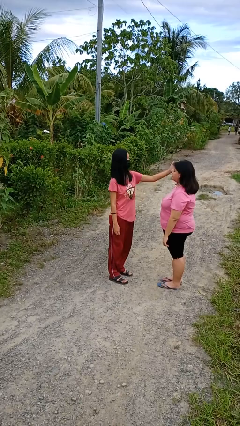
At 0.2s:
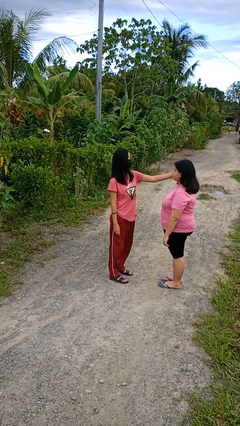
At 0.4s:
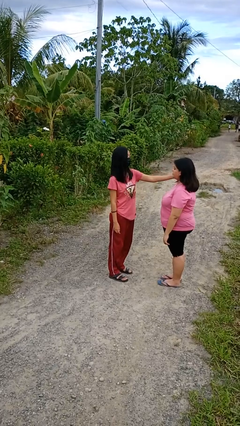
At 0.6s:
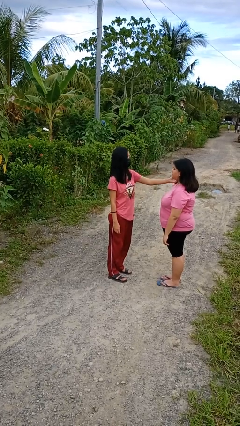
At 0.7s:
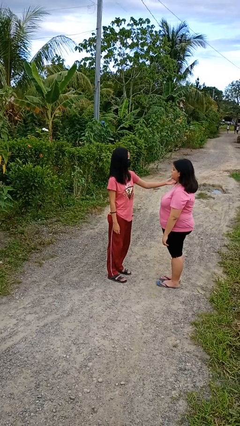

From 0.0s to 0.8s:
person touches face of person

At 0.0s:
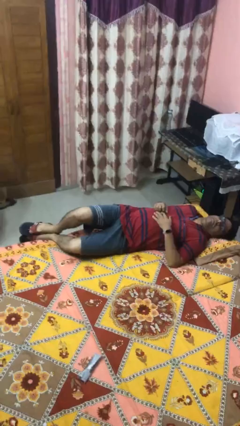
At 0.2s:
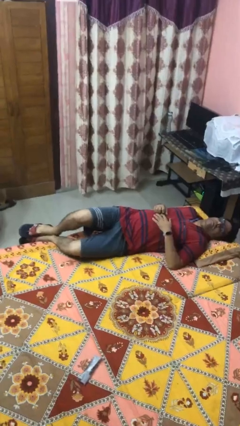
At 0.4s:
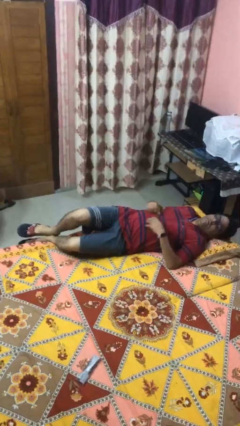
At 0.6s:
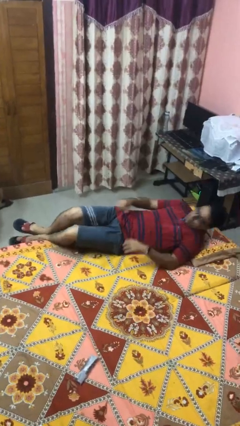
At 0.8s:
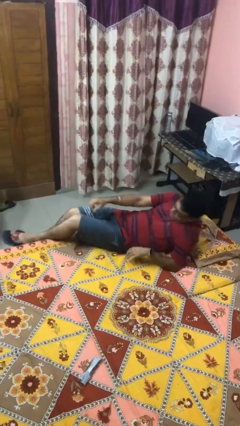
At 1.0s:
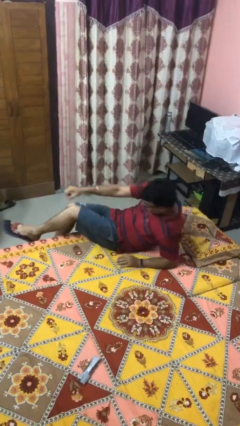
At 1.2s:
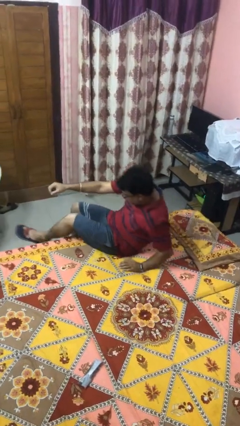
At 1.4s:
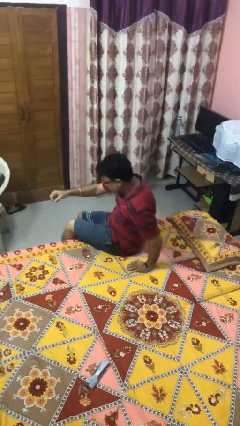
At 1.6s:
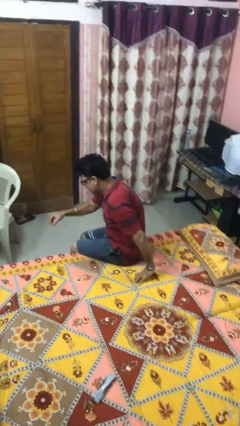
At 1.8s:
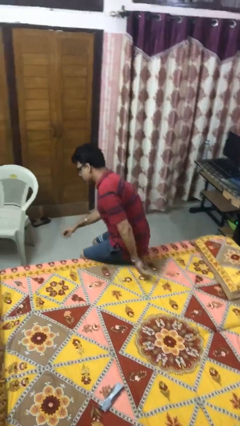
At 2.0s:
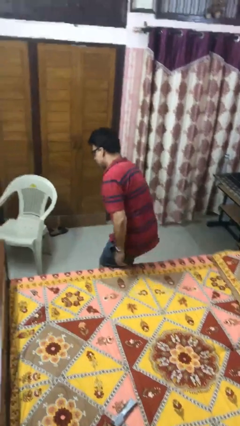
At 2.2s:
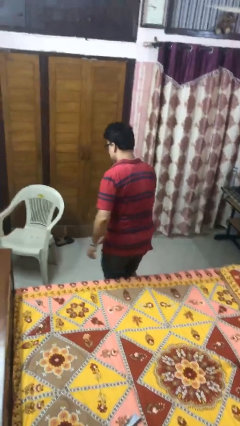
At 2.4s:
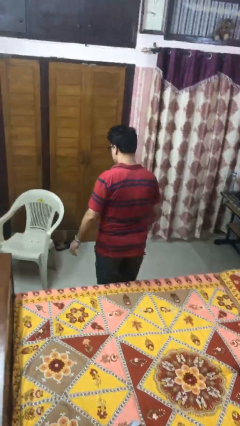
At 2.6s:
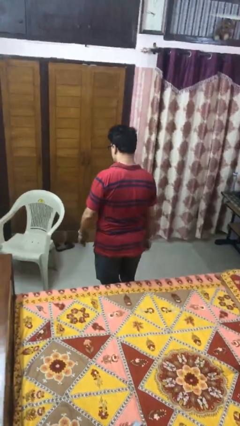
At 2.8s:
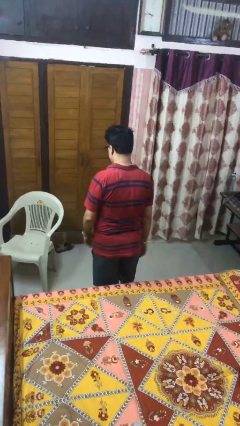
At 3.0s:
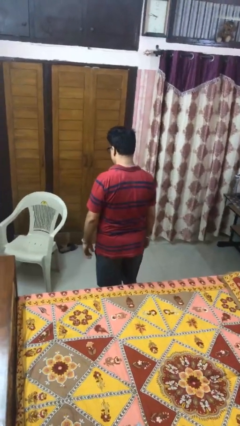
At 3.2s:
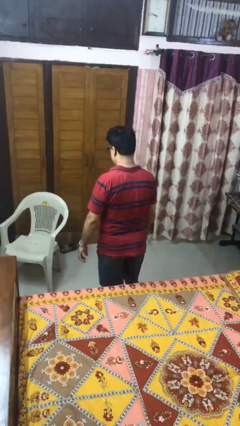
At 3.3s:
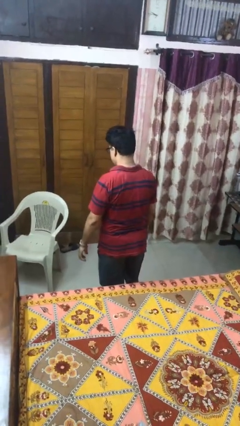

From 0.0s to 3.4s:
person stands up

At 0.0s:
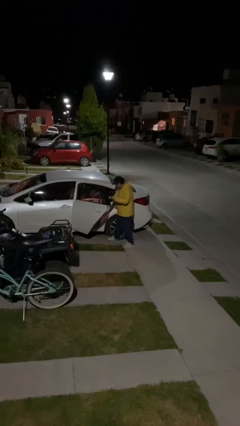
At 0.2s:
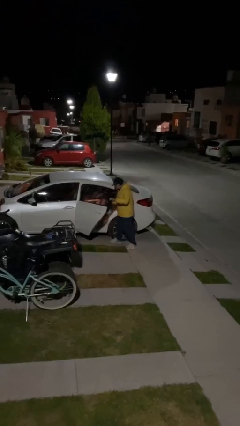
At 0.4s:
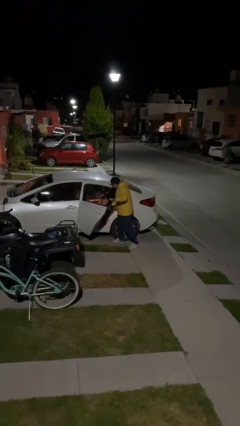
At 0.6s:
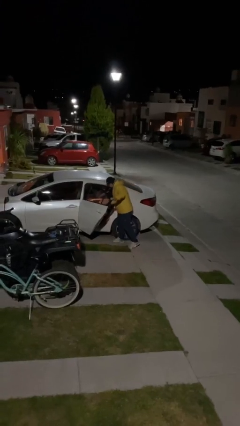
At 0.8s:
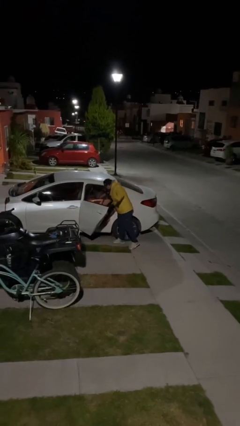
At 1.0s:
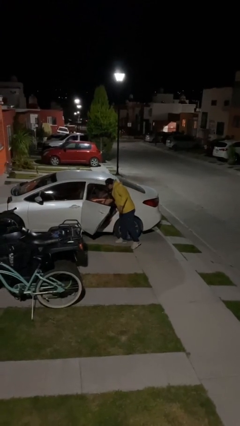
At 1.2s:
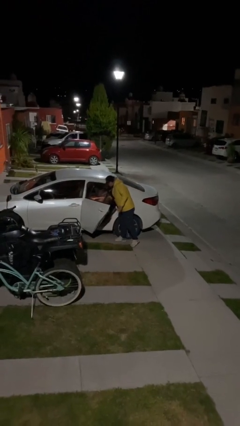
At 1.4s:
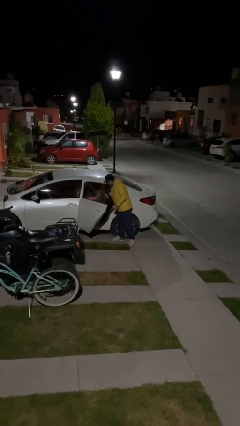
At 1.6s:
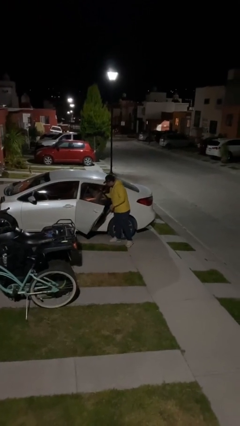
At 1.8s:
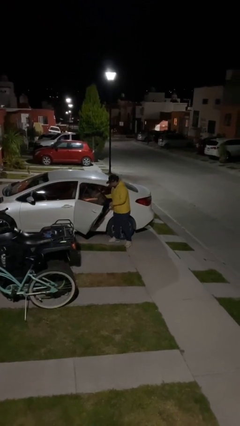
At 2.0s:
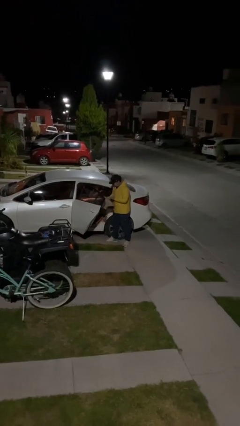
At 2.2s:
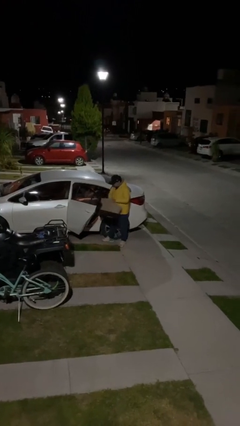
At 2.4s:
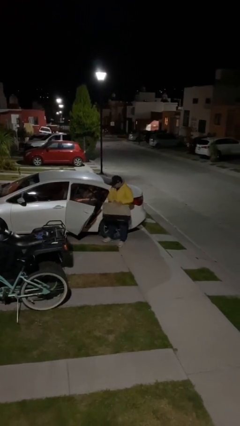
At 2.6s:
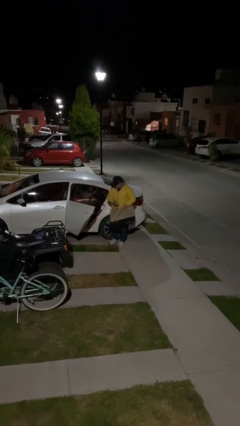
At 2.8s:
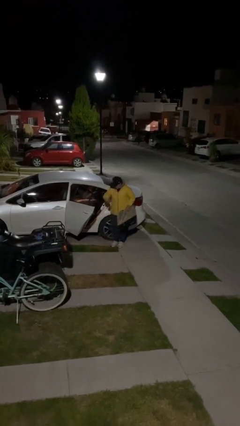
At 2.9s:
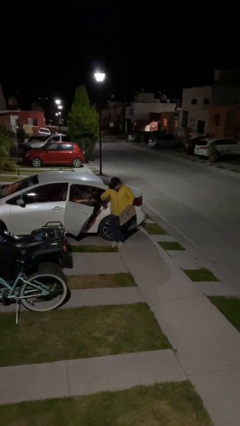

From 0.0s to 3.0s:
person unloads car

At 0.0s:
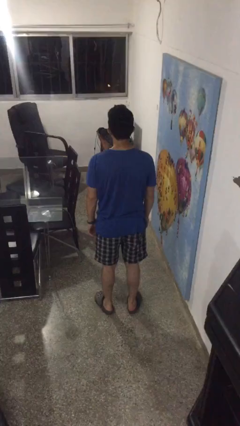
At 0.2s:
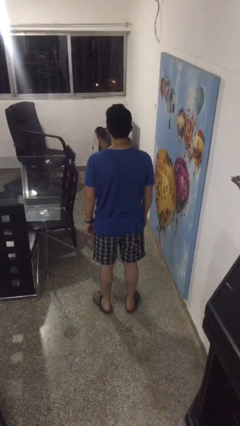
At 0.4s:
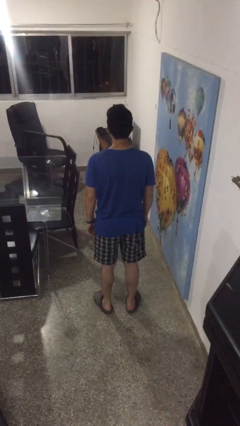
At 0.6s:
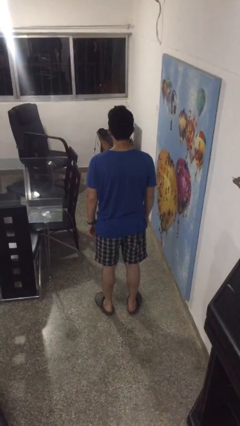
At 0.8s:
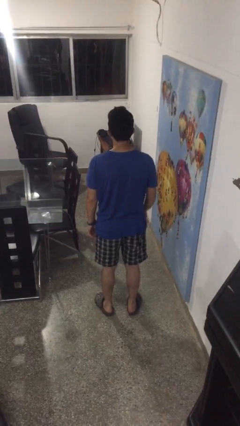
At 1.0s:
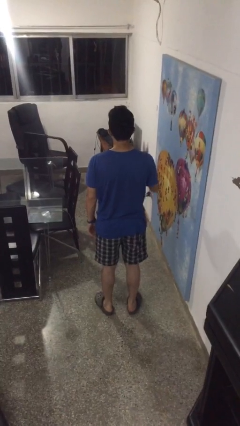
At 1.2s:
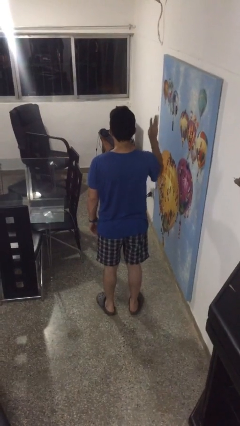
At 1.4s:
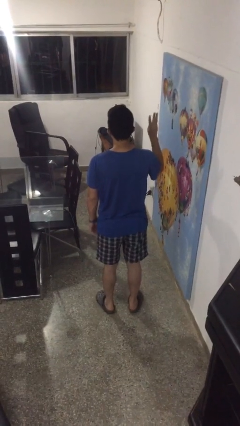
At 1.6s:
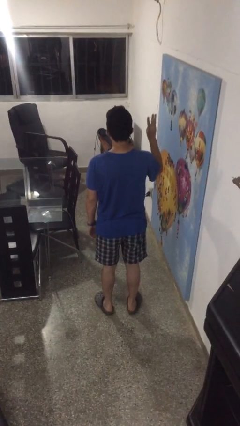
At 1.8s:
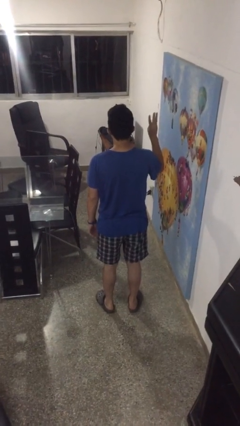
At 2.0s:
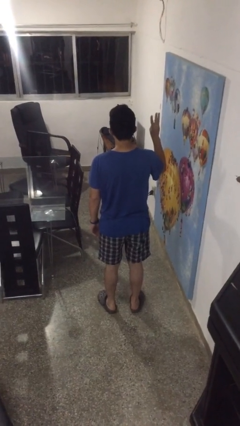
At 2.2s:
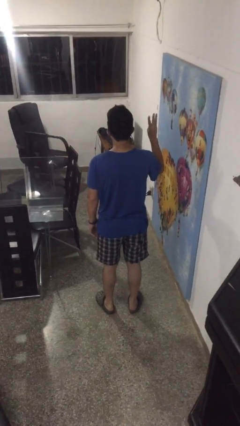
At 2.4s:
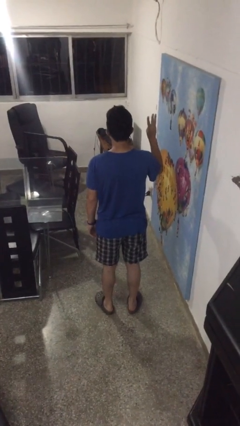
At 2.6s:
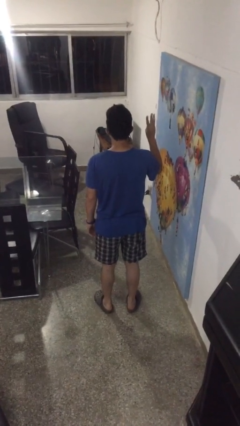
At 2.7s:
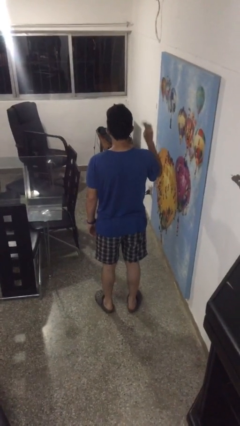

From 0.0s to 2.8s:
person gestures number three

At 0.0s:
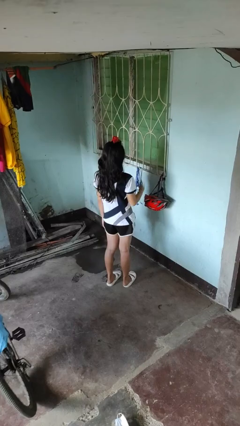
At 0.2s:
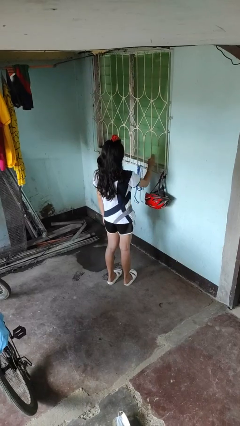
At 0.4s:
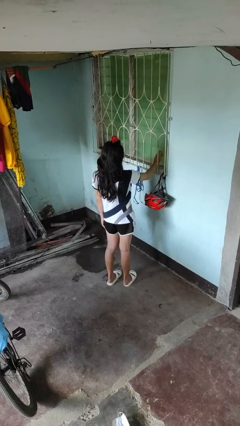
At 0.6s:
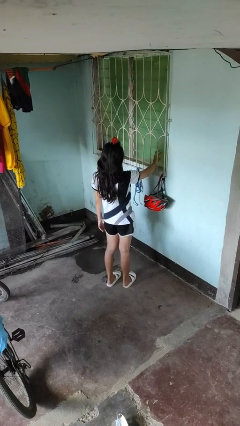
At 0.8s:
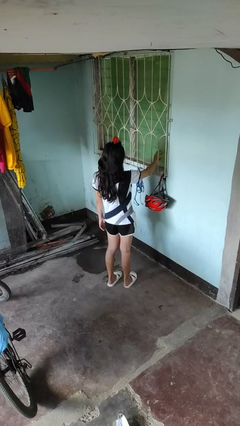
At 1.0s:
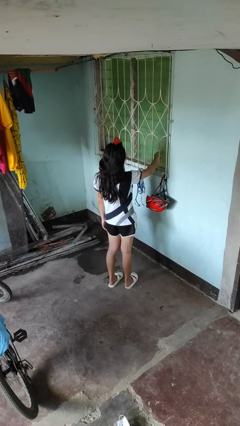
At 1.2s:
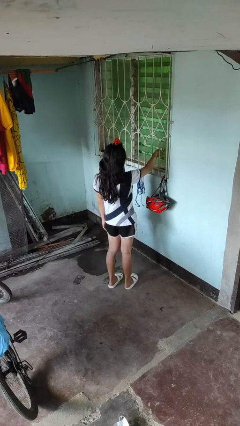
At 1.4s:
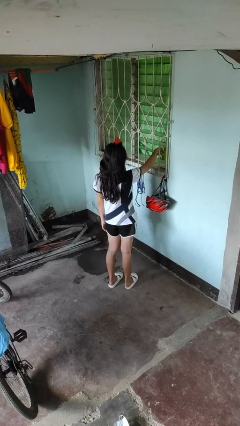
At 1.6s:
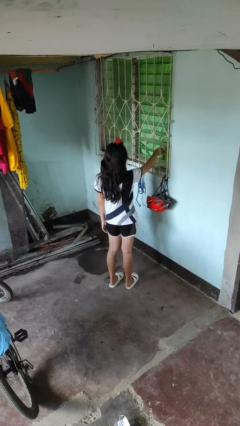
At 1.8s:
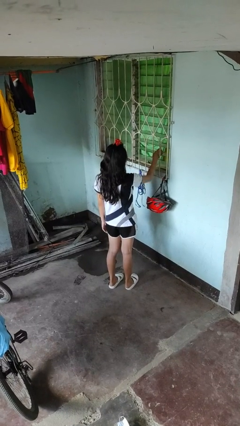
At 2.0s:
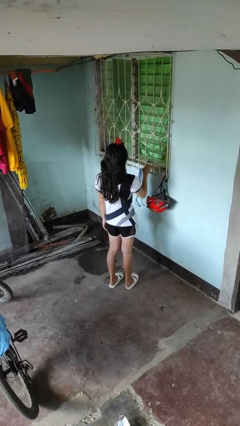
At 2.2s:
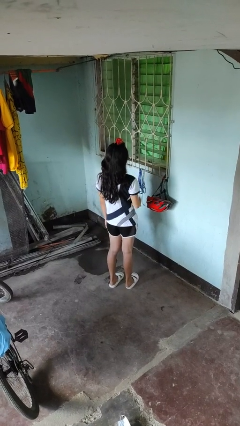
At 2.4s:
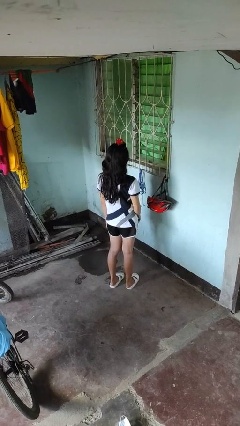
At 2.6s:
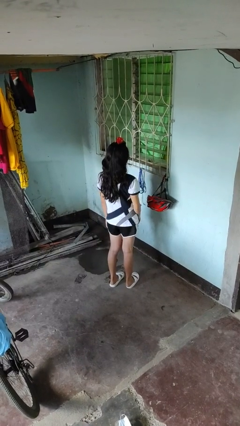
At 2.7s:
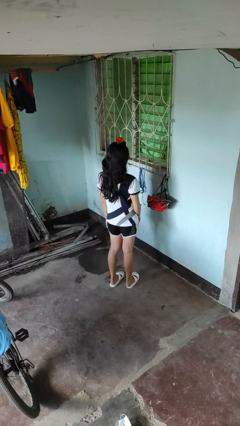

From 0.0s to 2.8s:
person opens home window

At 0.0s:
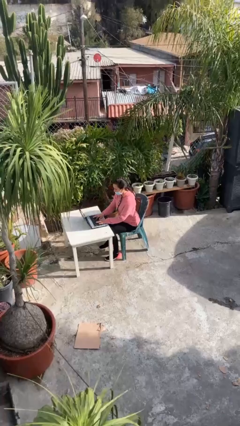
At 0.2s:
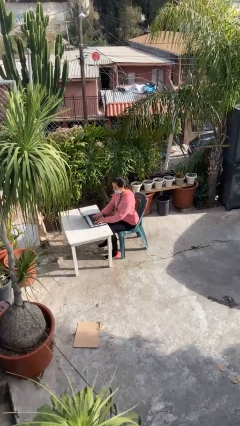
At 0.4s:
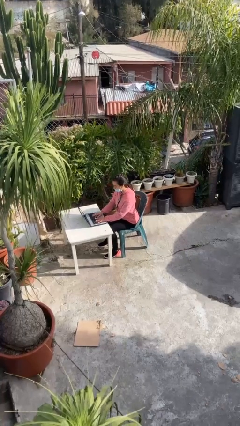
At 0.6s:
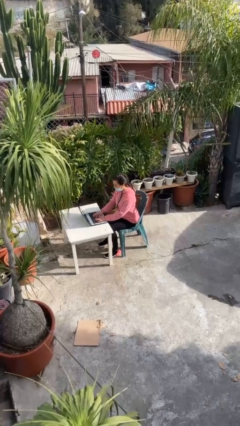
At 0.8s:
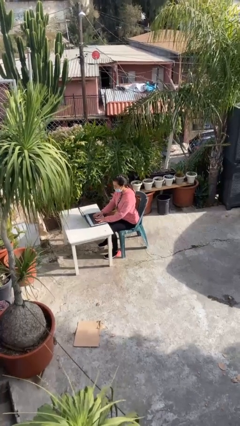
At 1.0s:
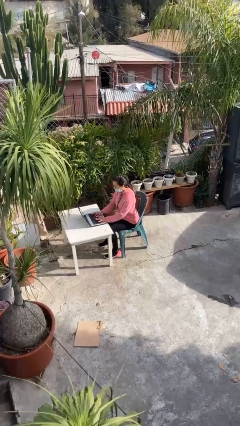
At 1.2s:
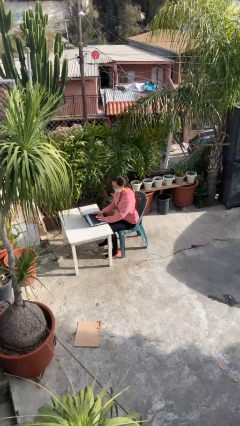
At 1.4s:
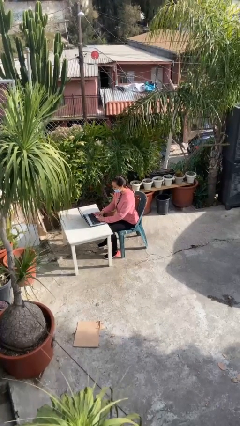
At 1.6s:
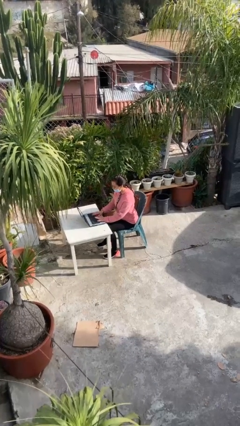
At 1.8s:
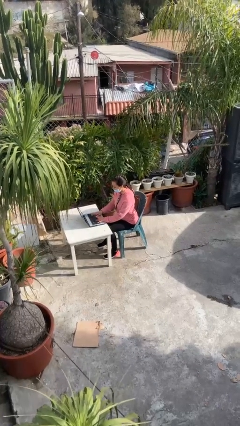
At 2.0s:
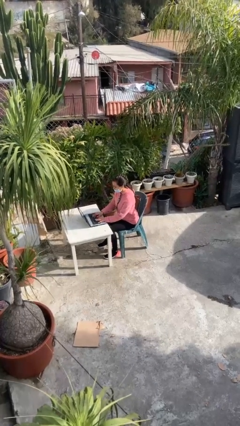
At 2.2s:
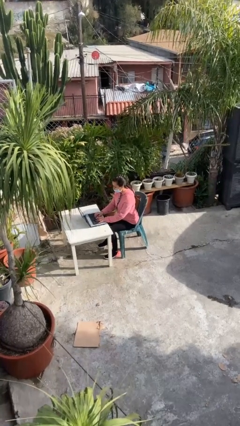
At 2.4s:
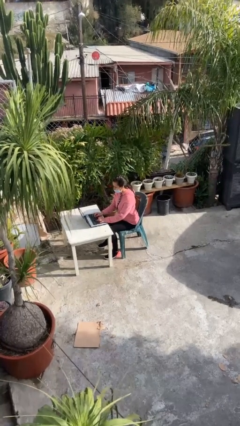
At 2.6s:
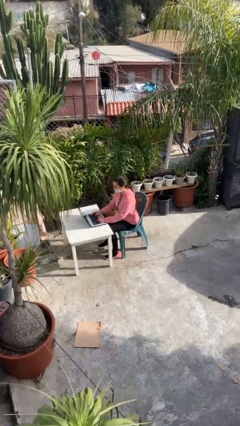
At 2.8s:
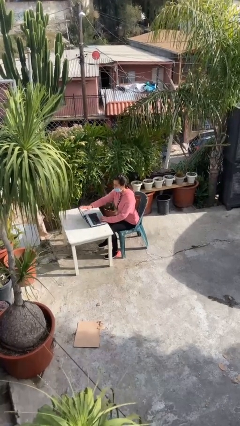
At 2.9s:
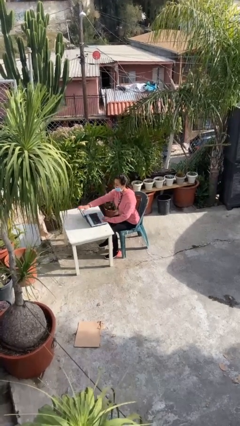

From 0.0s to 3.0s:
person interacts with laptop

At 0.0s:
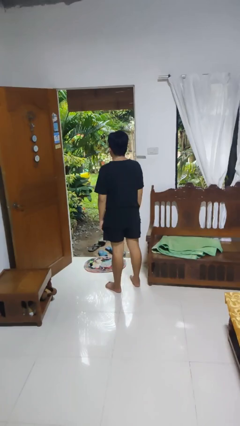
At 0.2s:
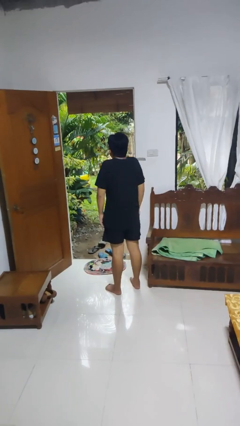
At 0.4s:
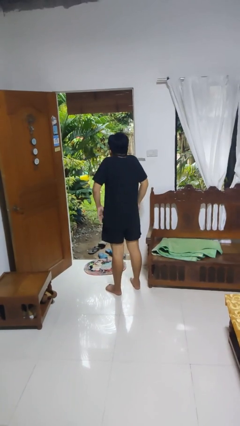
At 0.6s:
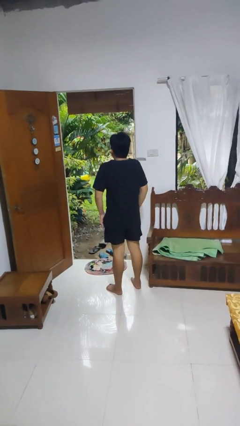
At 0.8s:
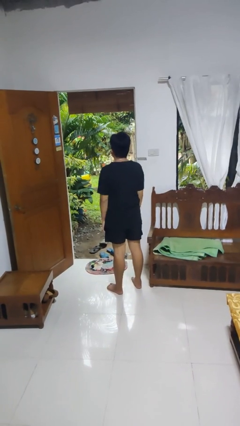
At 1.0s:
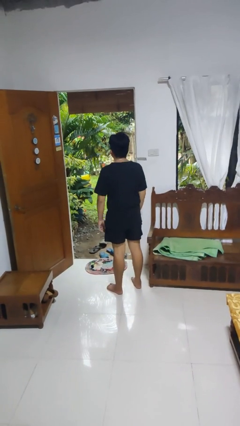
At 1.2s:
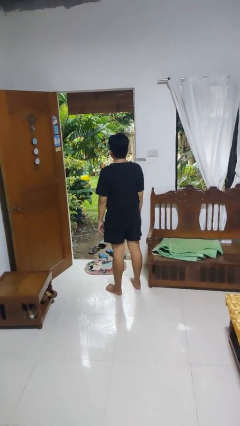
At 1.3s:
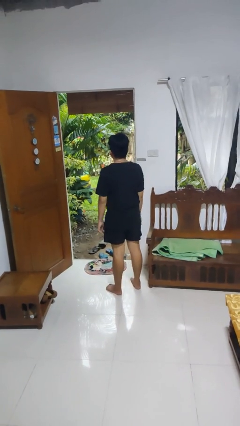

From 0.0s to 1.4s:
person shrugs

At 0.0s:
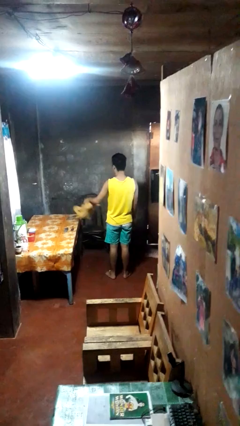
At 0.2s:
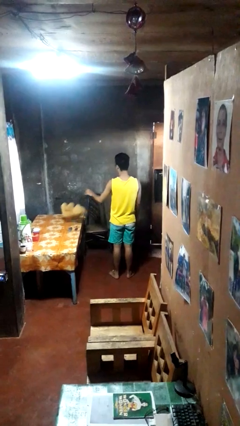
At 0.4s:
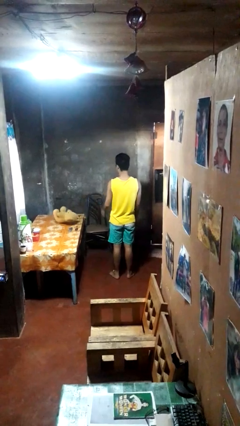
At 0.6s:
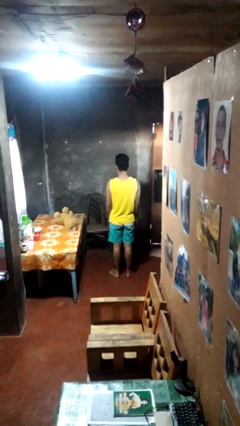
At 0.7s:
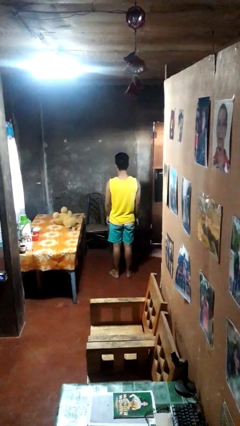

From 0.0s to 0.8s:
person throws object on table
